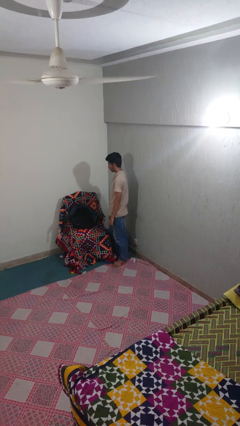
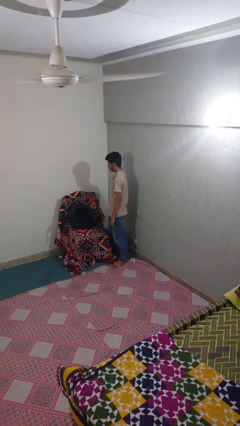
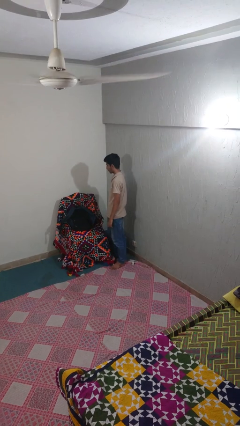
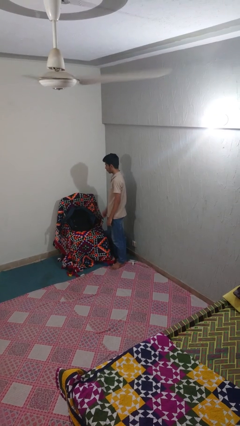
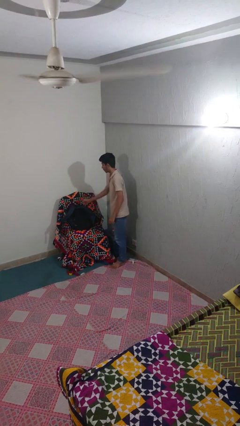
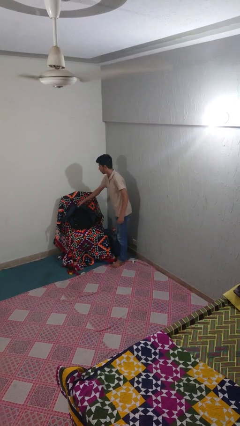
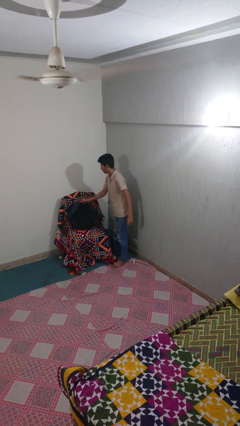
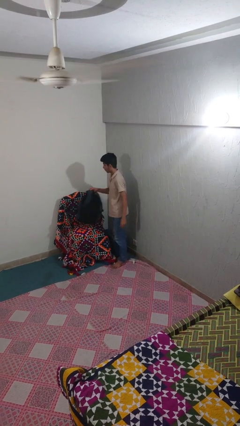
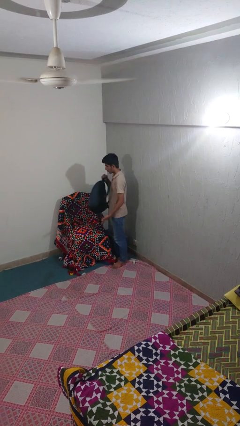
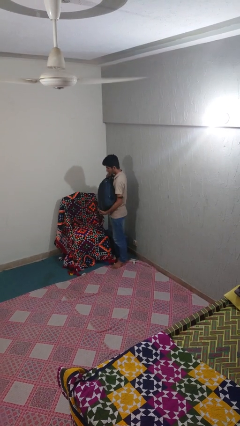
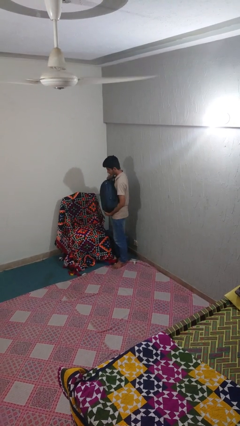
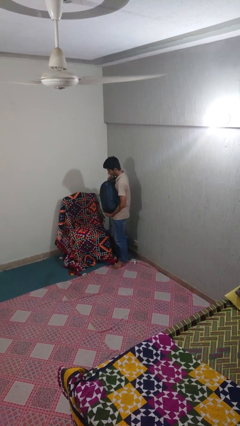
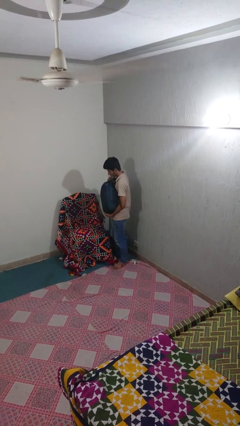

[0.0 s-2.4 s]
person picks up object from couch

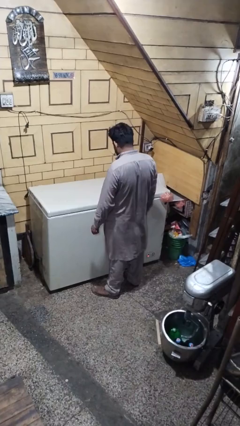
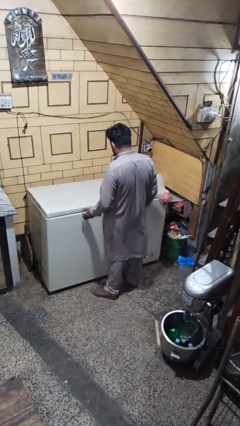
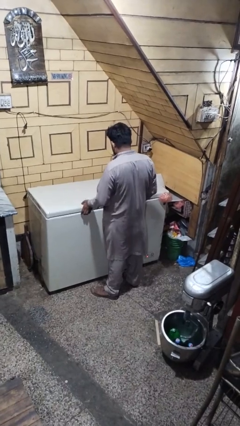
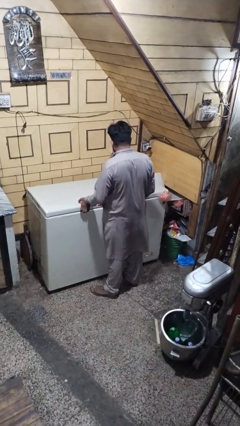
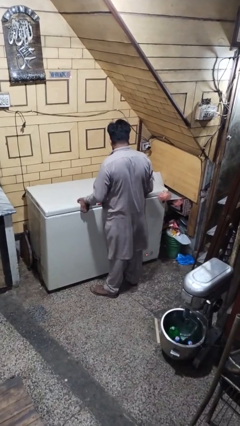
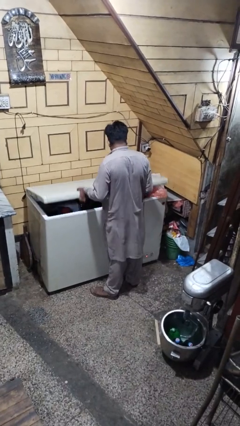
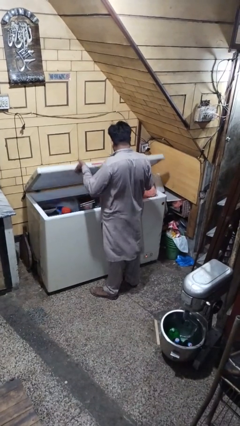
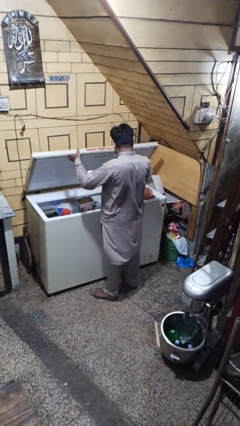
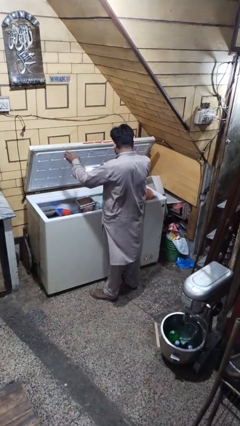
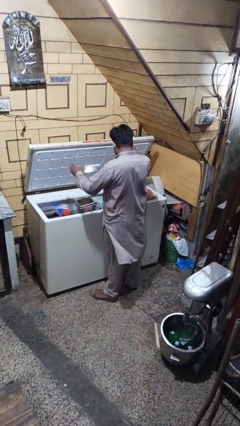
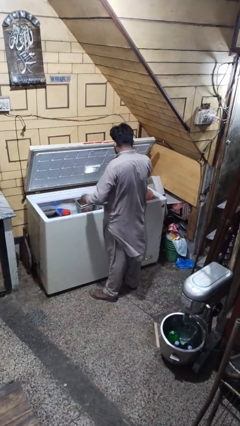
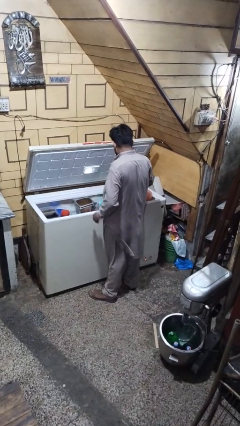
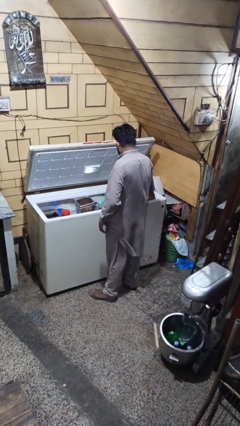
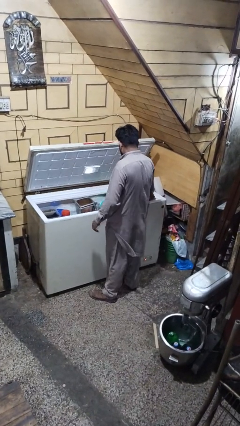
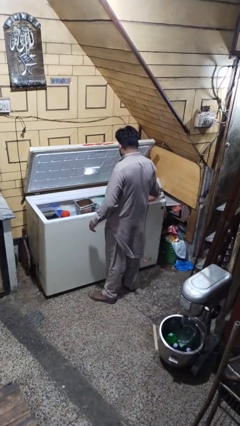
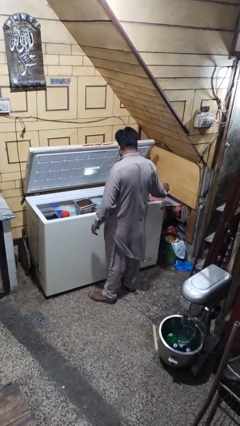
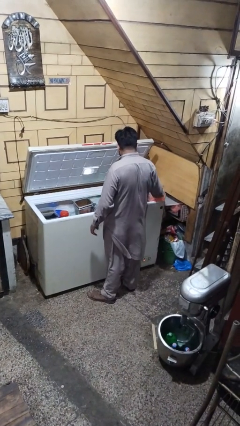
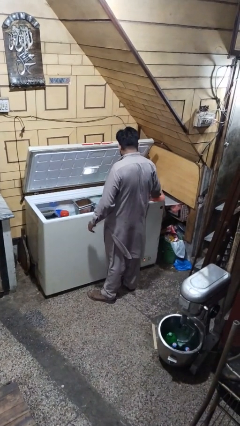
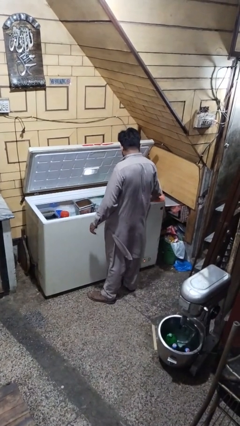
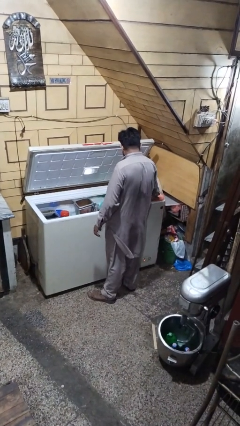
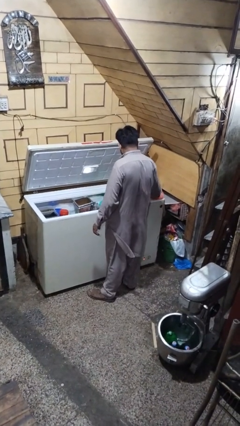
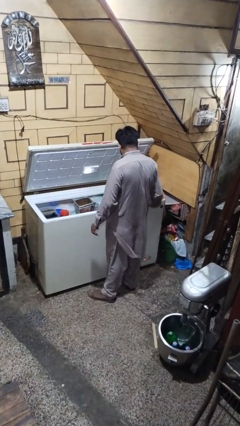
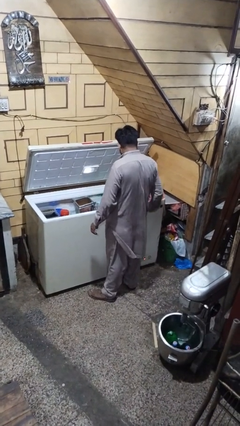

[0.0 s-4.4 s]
person opens refrigerator

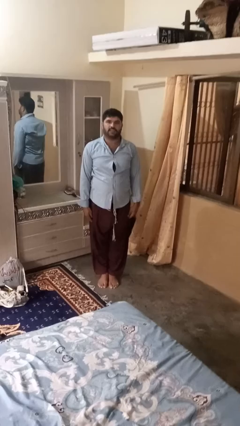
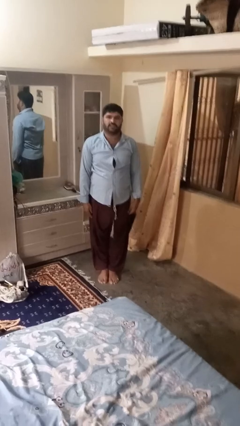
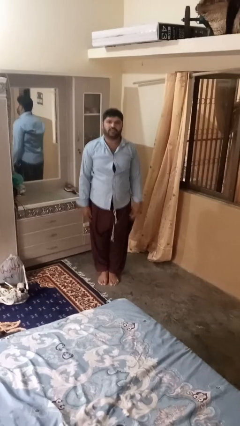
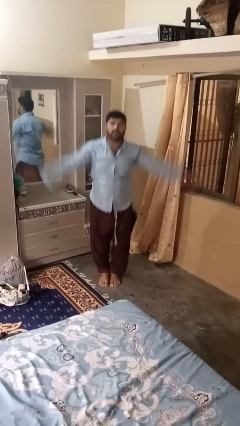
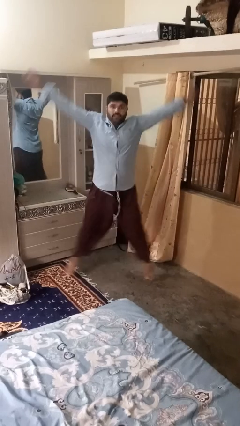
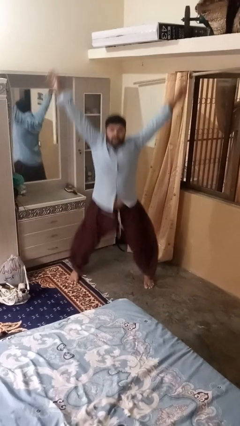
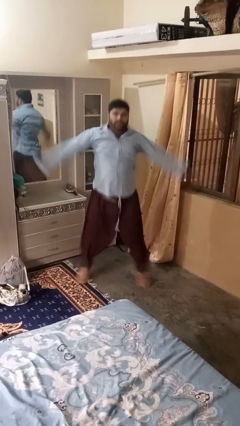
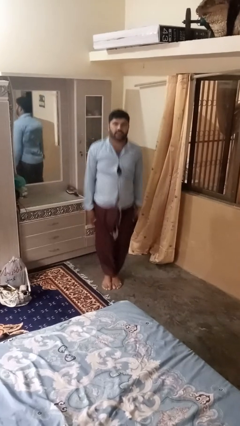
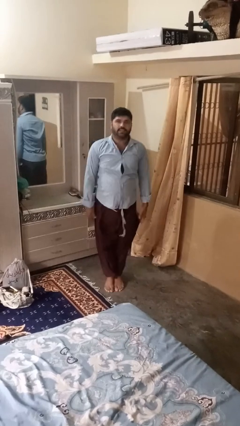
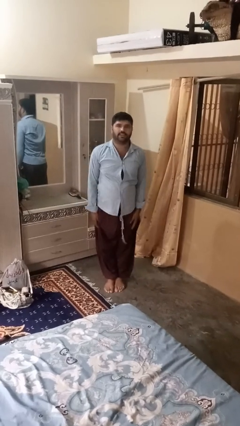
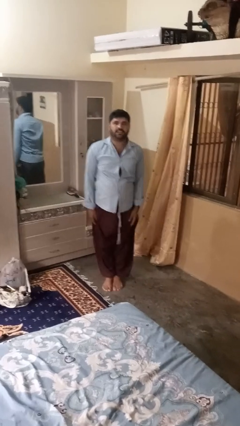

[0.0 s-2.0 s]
person exercises with jumping jacks

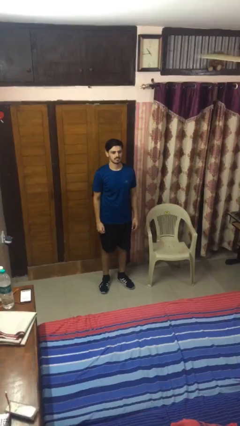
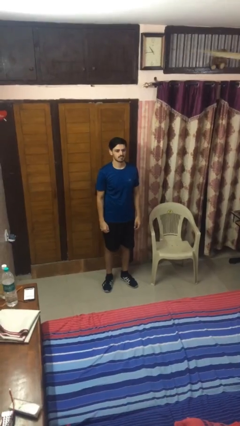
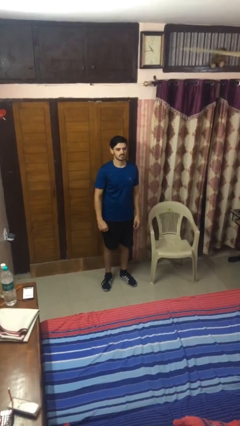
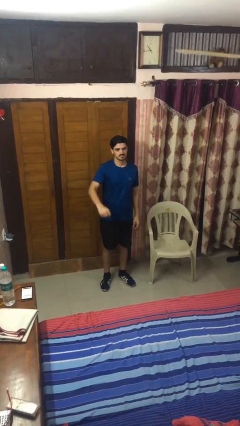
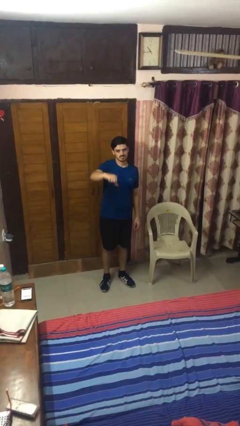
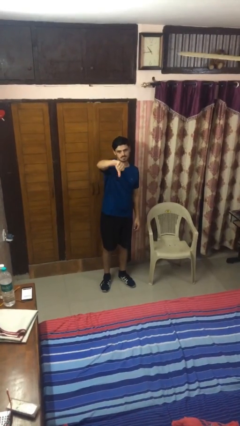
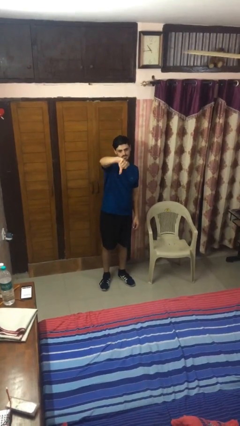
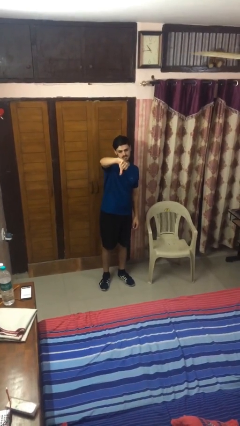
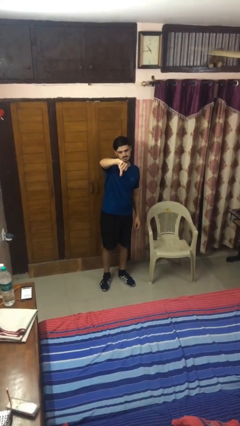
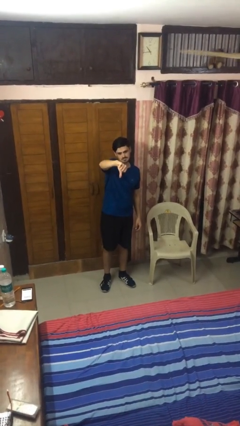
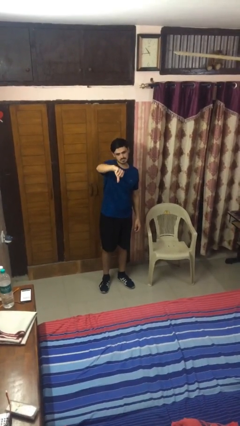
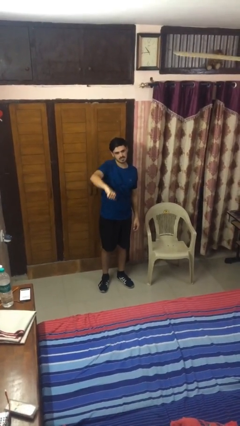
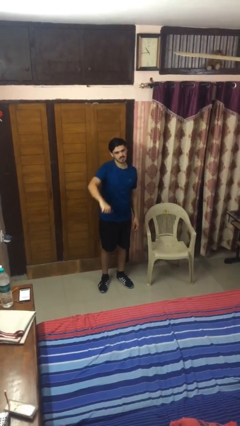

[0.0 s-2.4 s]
person gestures thumbs down

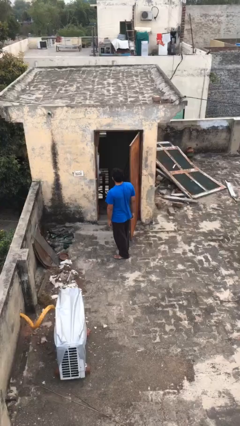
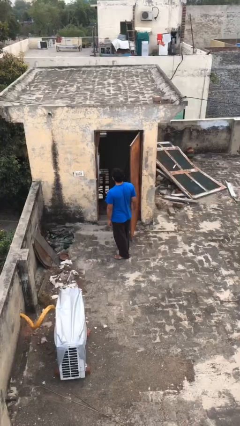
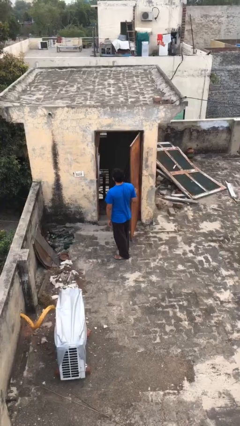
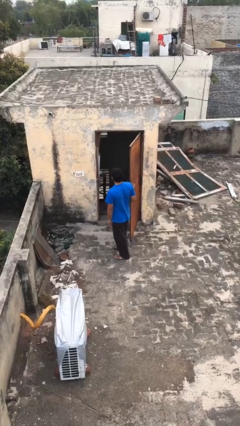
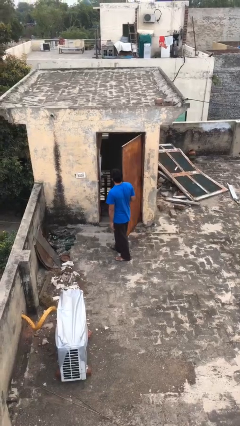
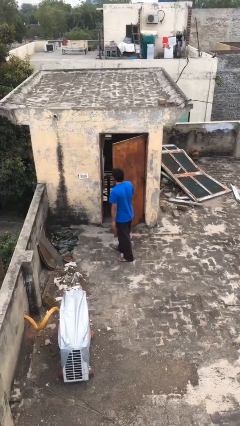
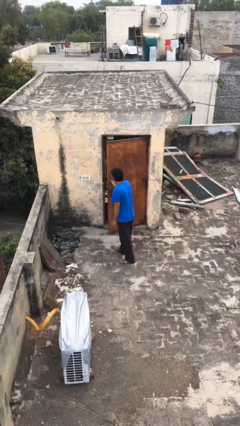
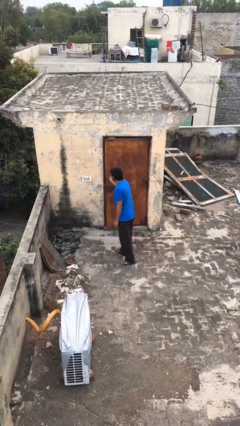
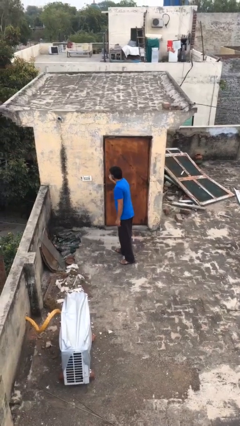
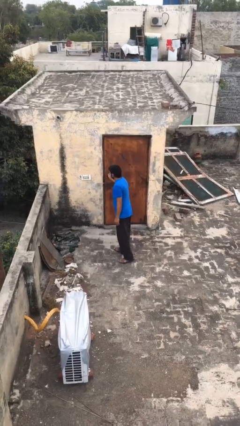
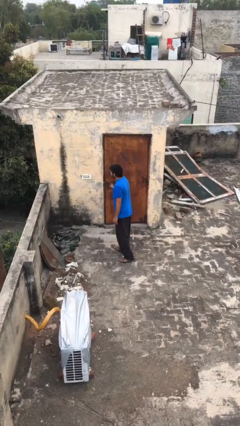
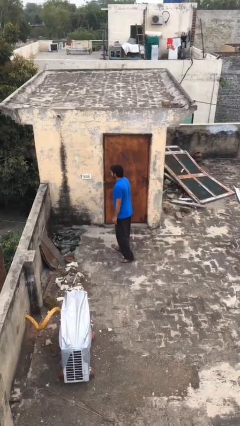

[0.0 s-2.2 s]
person closes facility door

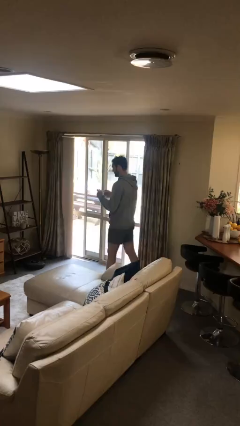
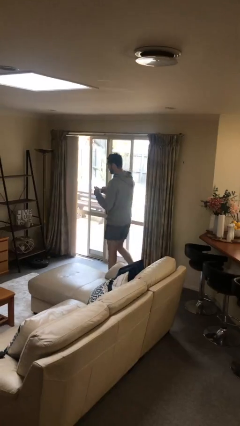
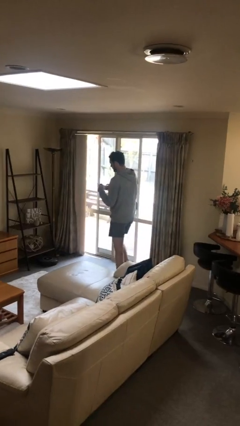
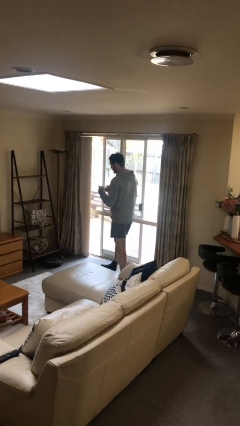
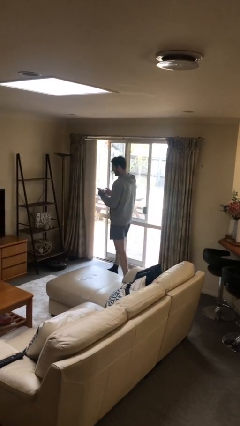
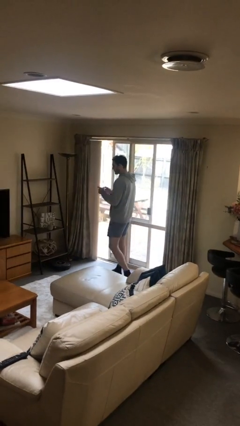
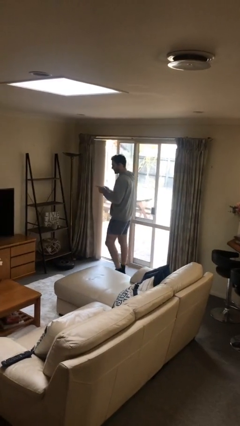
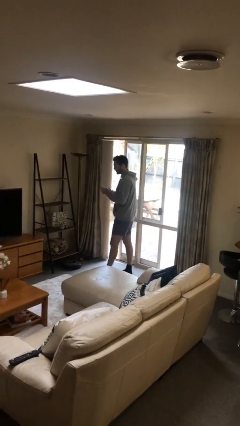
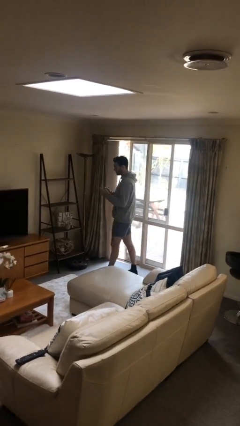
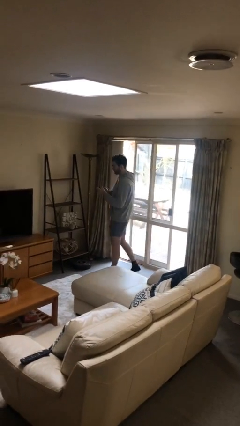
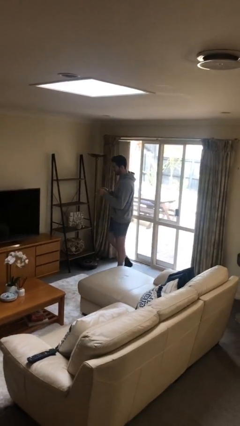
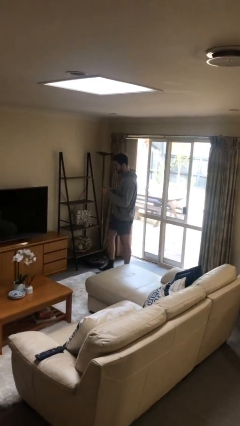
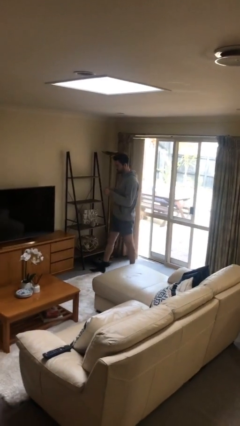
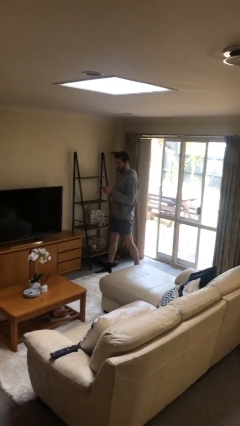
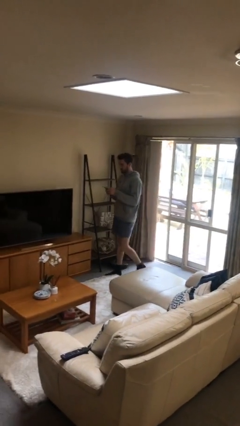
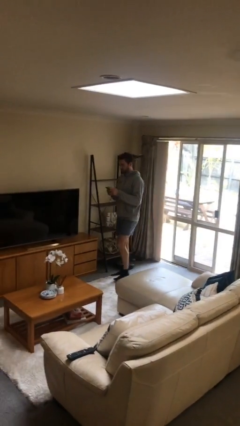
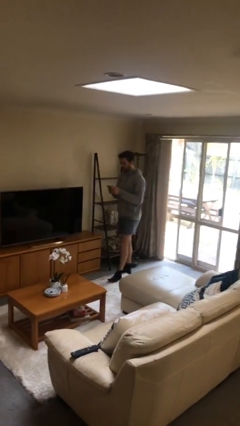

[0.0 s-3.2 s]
person texts on phone

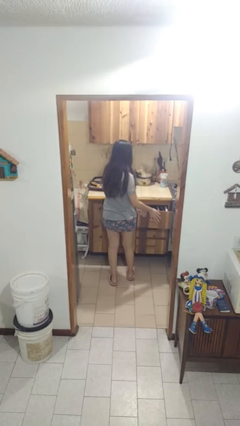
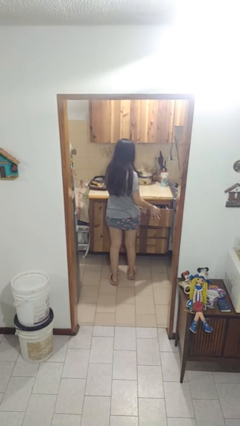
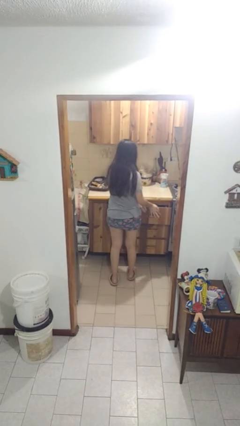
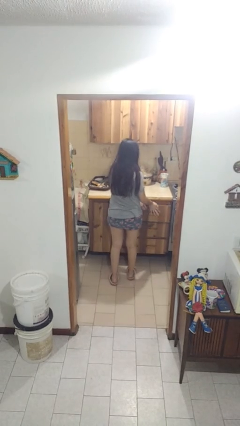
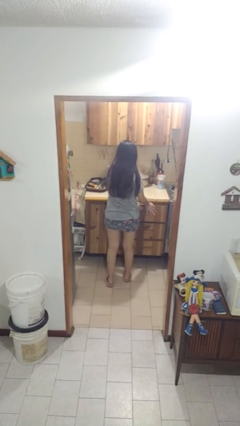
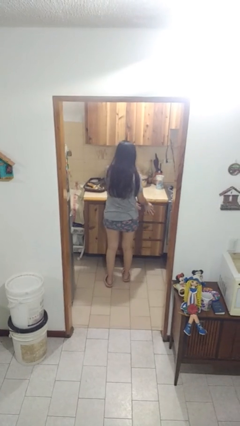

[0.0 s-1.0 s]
person closes kitchen drawer
